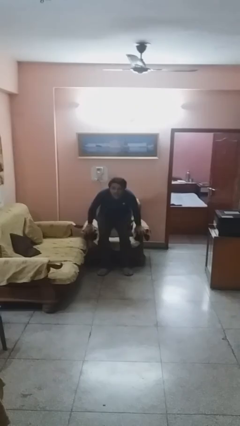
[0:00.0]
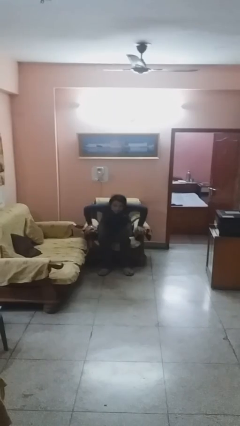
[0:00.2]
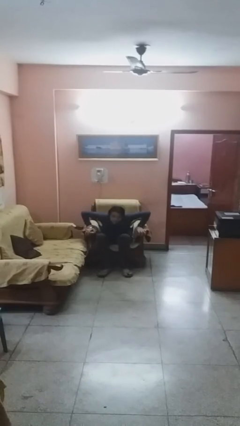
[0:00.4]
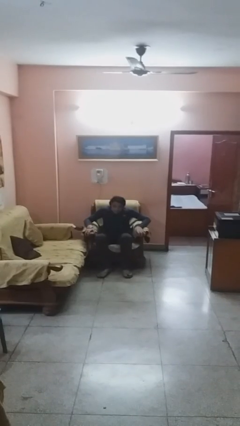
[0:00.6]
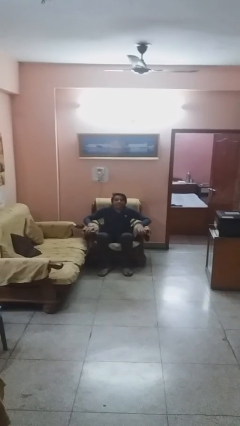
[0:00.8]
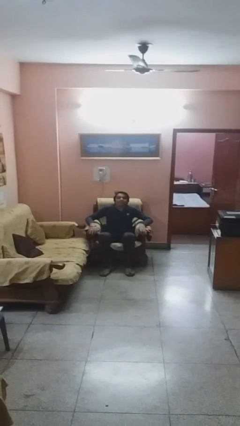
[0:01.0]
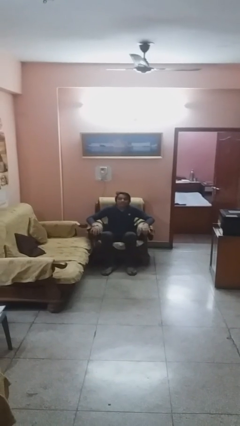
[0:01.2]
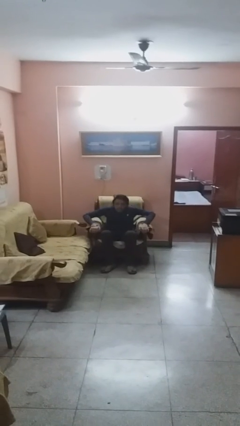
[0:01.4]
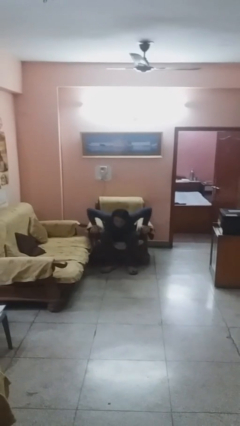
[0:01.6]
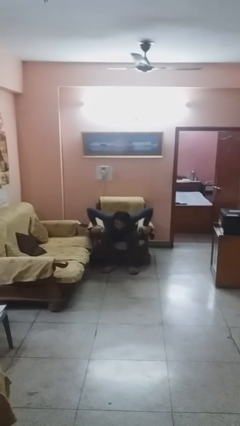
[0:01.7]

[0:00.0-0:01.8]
person sits down

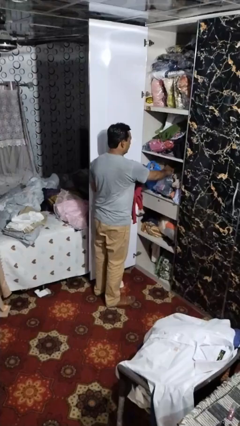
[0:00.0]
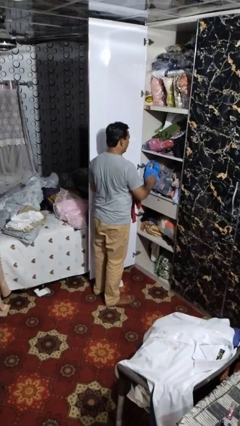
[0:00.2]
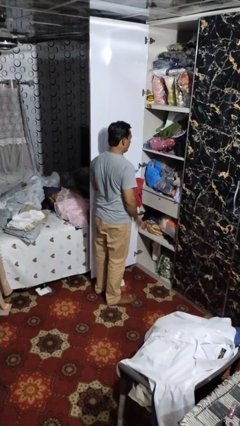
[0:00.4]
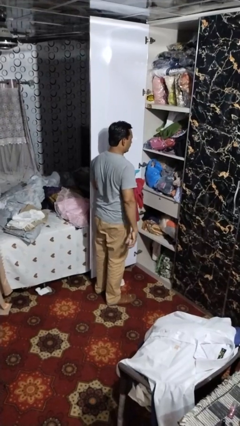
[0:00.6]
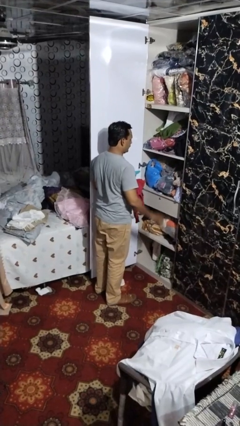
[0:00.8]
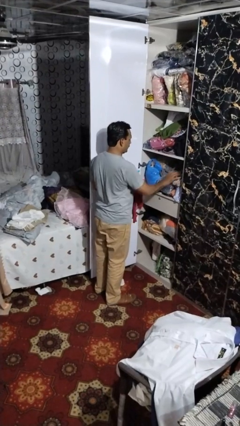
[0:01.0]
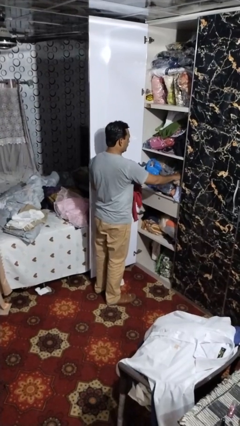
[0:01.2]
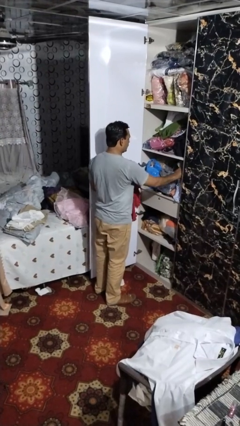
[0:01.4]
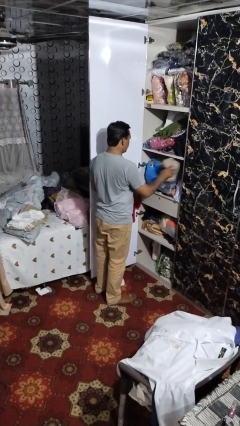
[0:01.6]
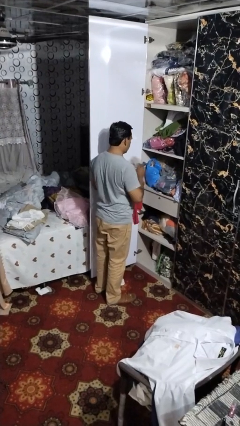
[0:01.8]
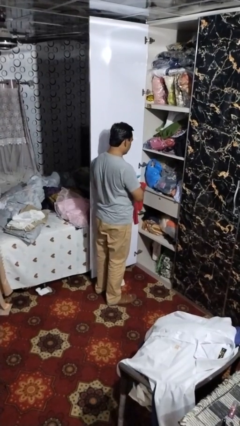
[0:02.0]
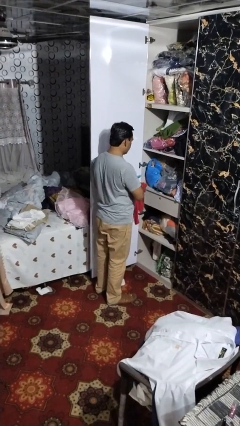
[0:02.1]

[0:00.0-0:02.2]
person takes clothes from dresser

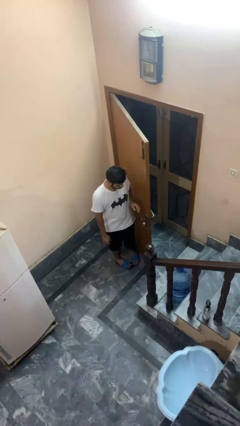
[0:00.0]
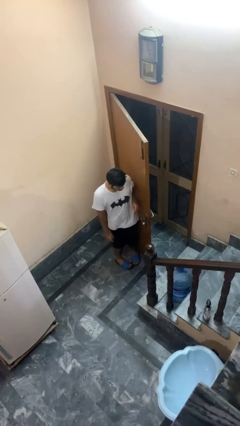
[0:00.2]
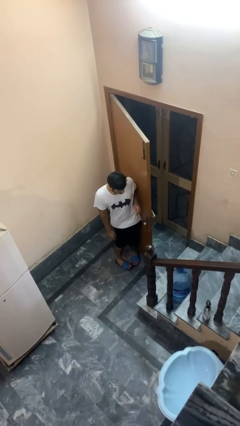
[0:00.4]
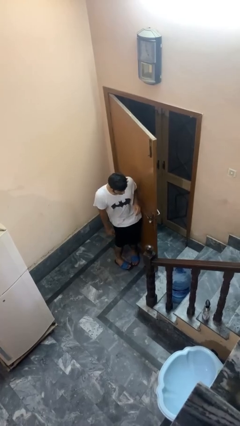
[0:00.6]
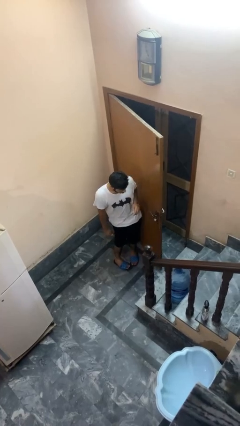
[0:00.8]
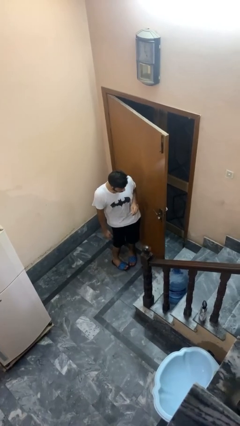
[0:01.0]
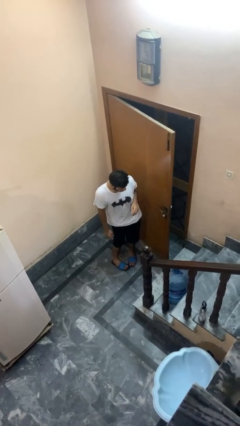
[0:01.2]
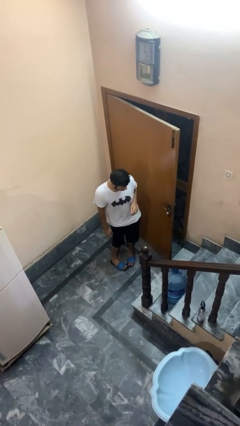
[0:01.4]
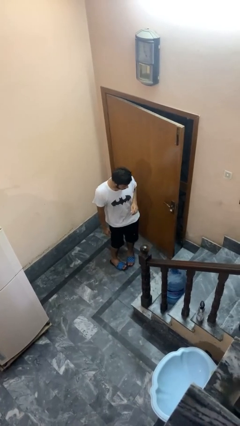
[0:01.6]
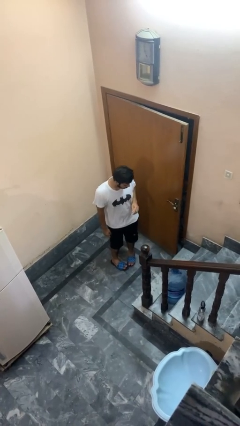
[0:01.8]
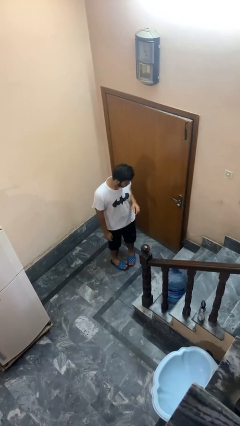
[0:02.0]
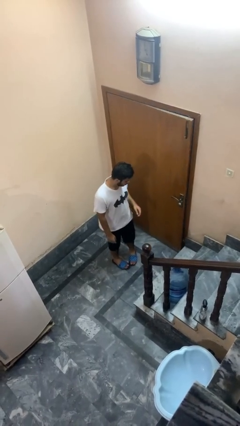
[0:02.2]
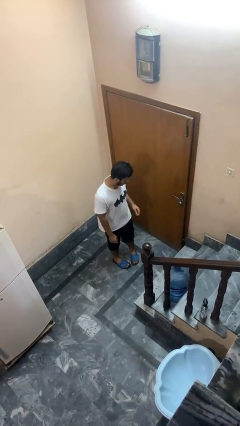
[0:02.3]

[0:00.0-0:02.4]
person closes door with hip

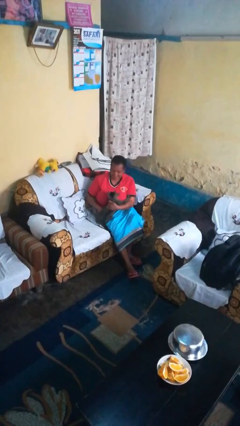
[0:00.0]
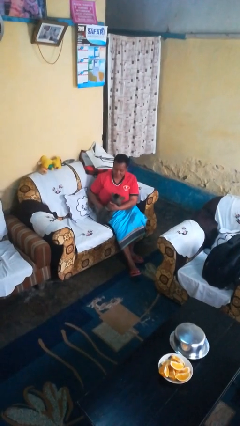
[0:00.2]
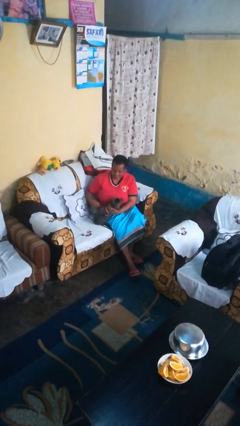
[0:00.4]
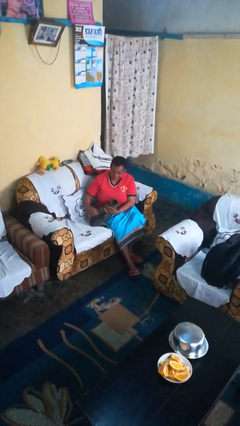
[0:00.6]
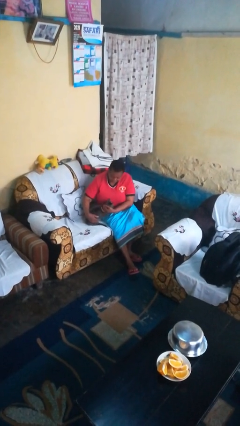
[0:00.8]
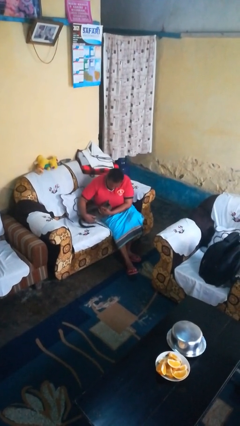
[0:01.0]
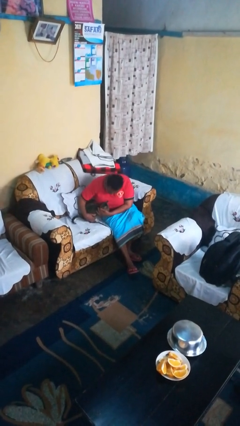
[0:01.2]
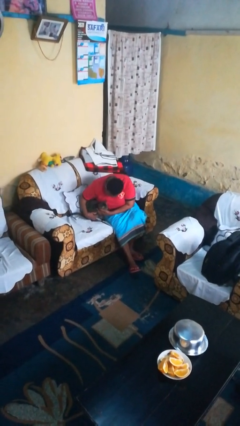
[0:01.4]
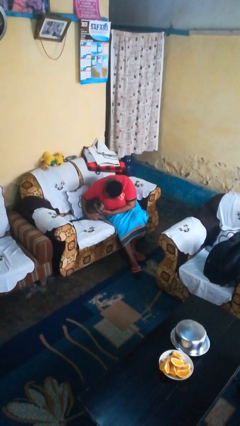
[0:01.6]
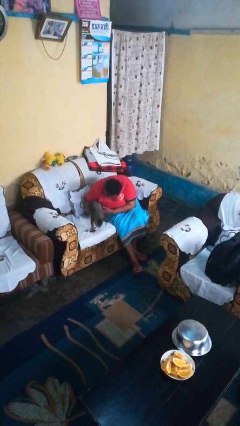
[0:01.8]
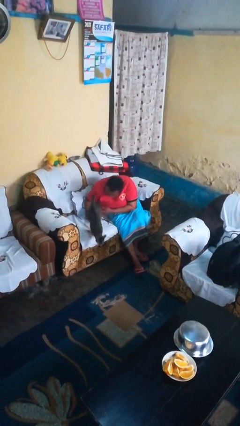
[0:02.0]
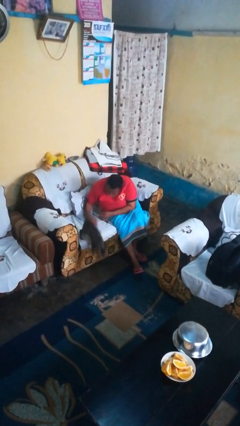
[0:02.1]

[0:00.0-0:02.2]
person hugs cat

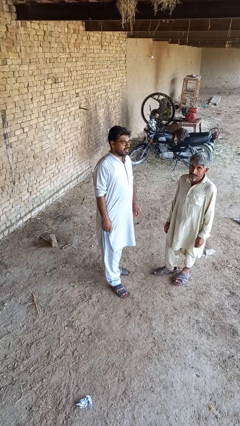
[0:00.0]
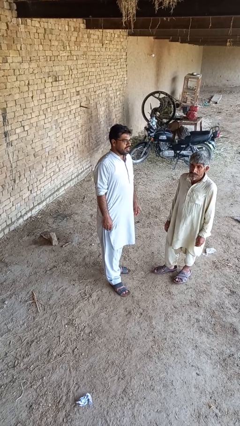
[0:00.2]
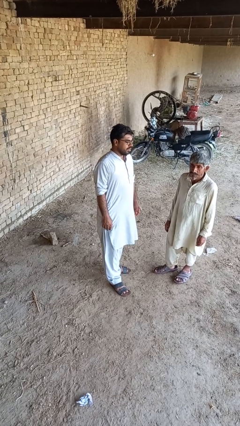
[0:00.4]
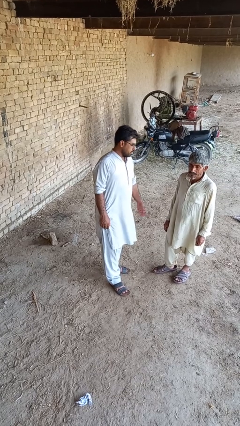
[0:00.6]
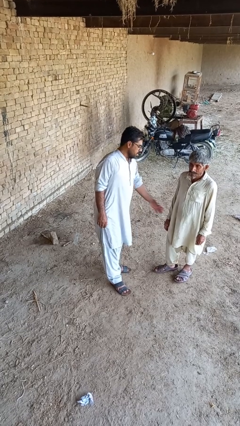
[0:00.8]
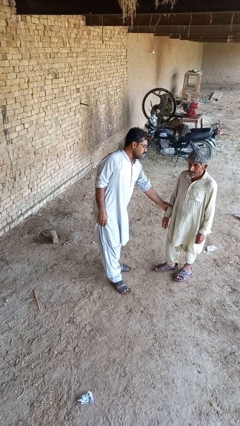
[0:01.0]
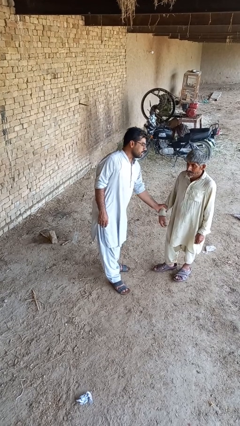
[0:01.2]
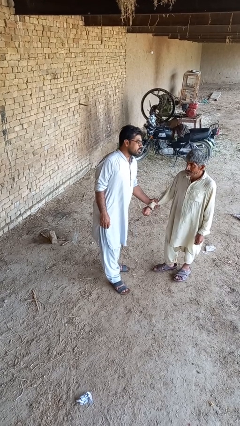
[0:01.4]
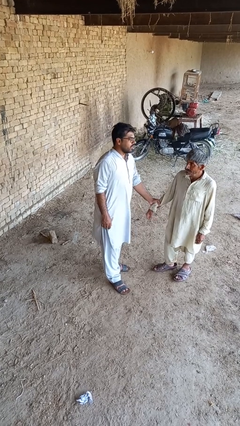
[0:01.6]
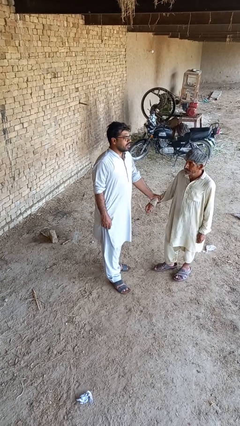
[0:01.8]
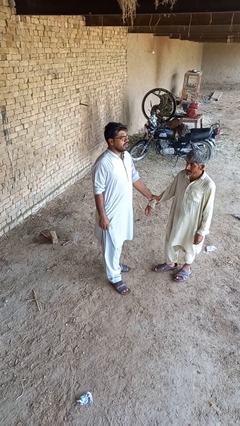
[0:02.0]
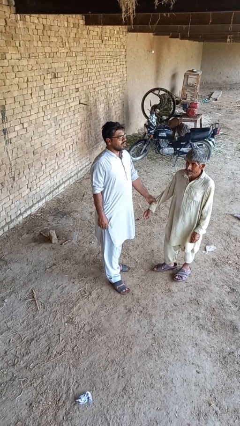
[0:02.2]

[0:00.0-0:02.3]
person grabs person by forearm

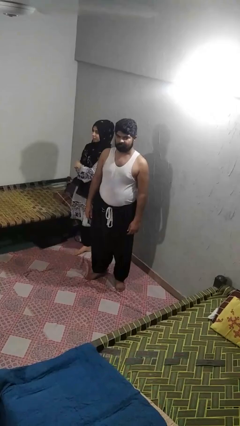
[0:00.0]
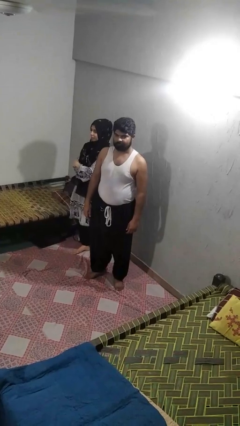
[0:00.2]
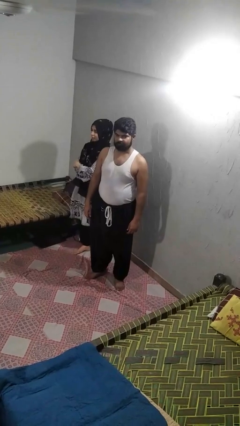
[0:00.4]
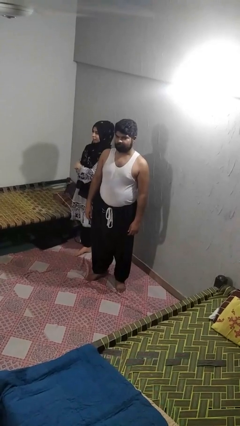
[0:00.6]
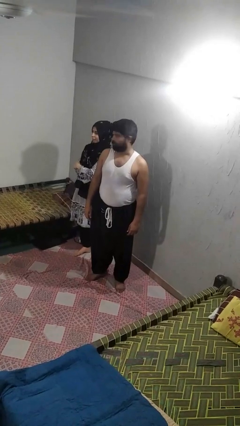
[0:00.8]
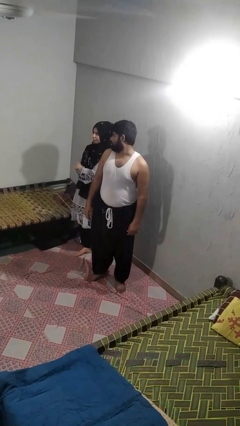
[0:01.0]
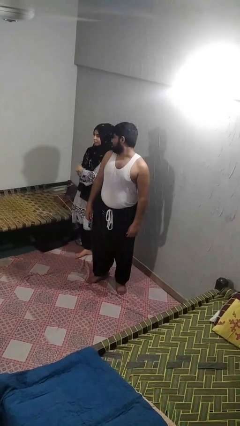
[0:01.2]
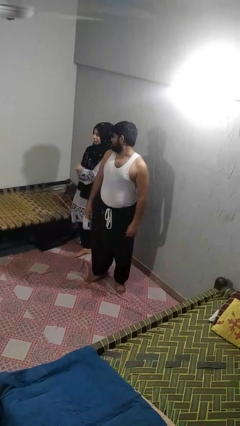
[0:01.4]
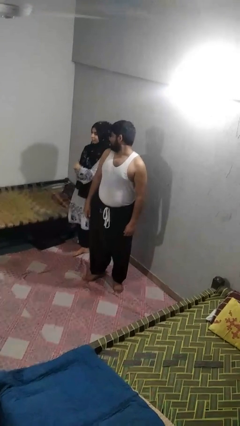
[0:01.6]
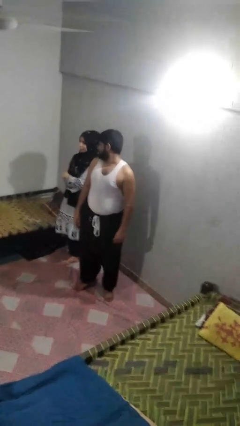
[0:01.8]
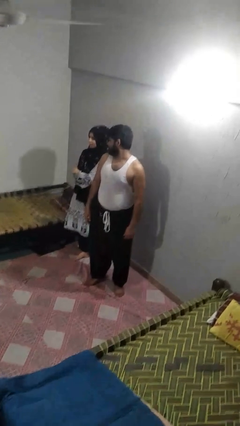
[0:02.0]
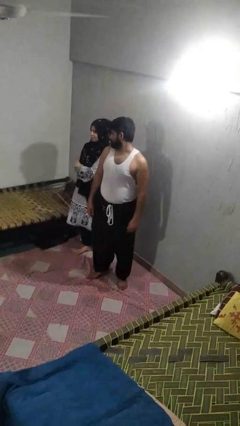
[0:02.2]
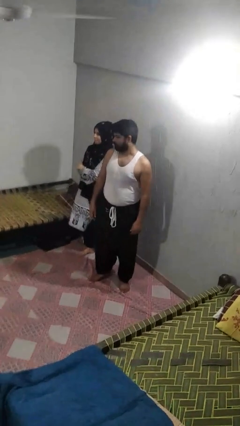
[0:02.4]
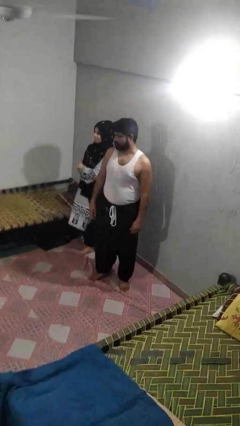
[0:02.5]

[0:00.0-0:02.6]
person looks over shoulder

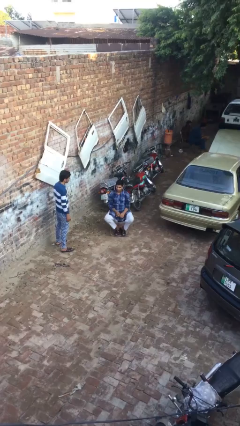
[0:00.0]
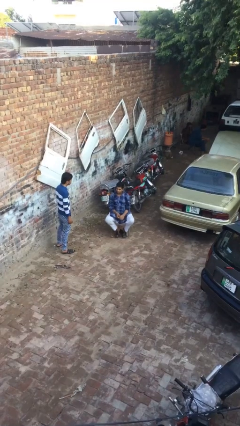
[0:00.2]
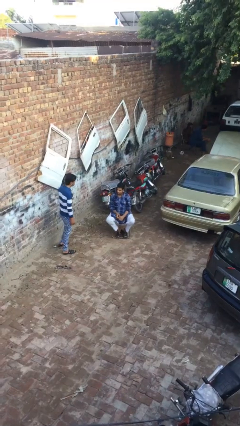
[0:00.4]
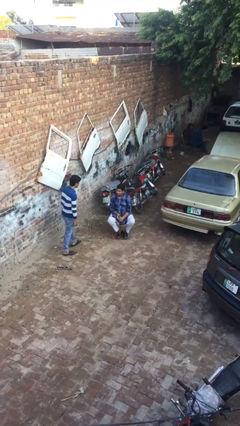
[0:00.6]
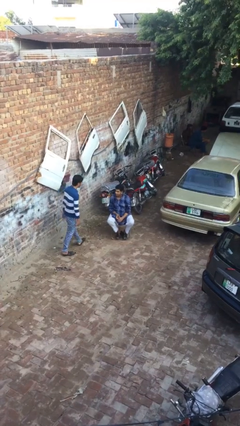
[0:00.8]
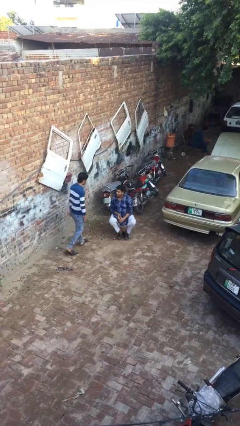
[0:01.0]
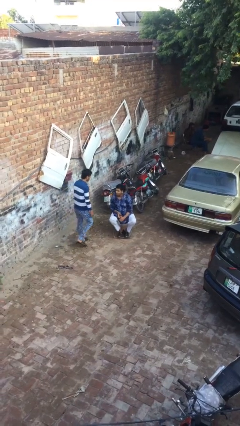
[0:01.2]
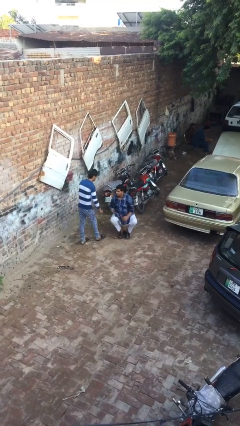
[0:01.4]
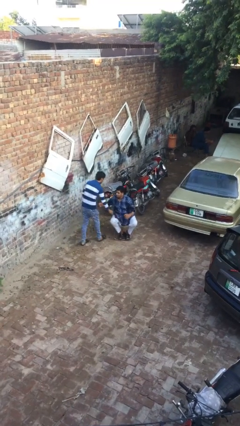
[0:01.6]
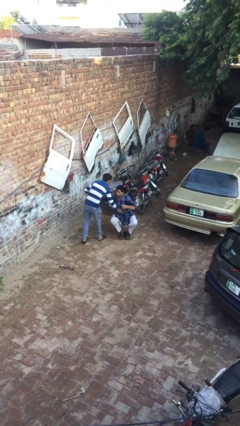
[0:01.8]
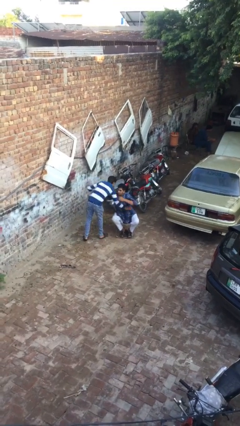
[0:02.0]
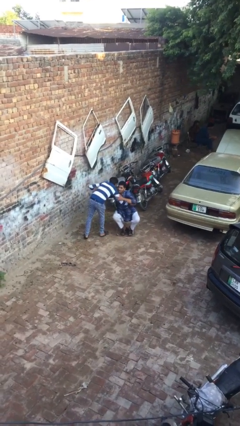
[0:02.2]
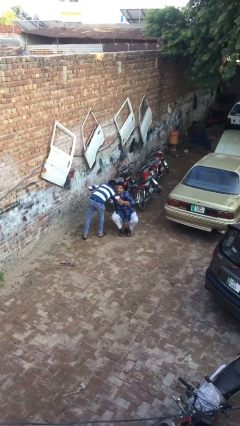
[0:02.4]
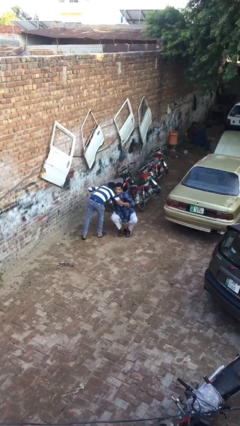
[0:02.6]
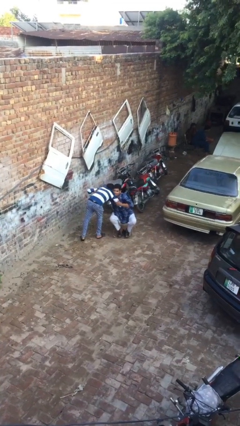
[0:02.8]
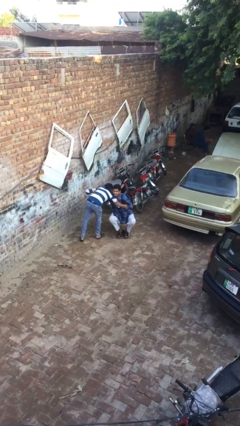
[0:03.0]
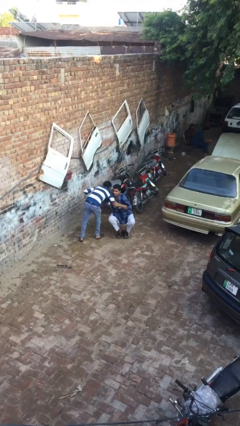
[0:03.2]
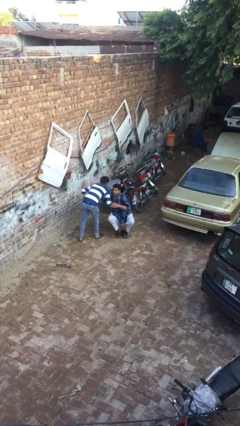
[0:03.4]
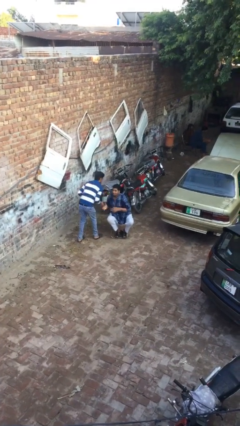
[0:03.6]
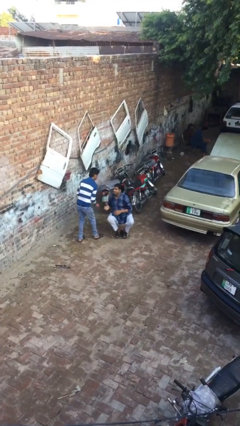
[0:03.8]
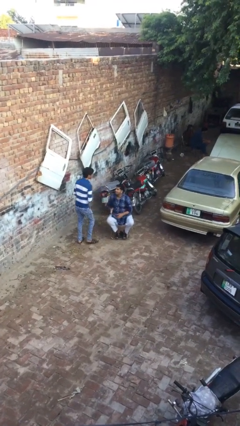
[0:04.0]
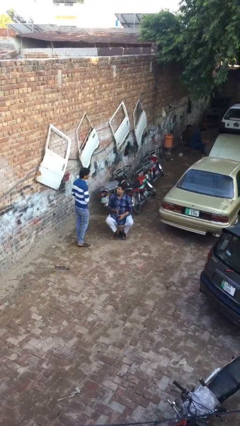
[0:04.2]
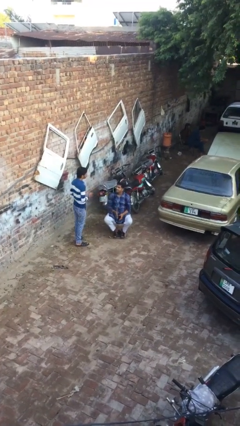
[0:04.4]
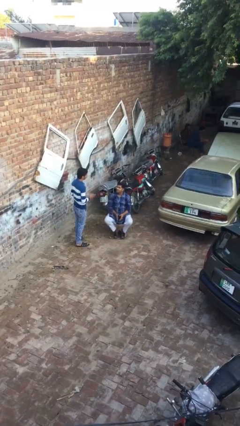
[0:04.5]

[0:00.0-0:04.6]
person embraces person
